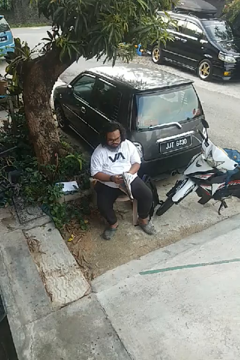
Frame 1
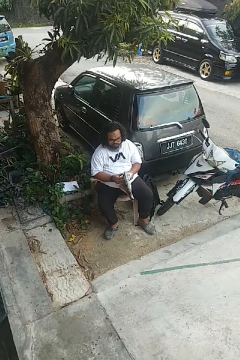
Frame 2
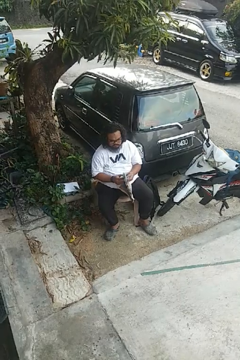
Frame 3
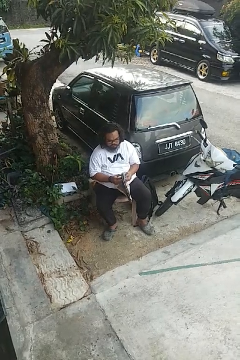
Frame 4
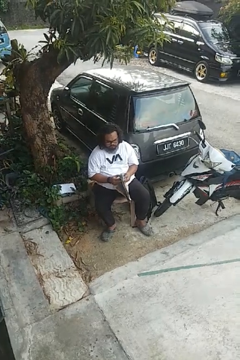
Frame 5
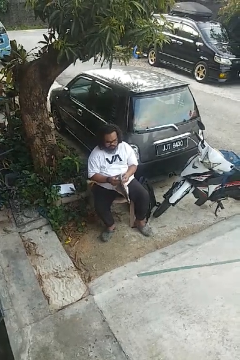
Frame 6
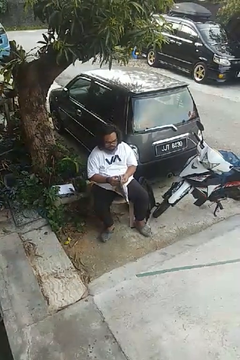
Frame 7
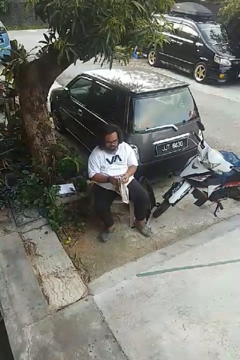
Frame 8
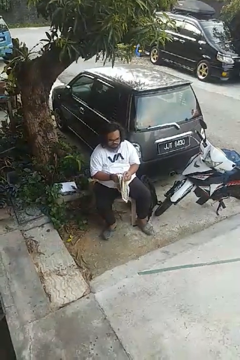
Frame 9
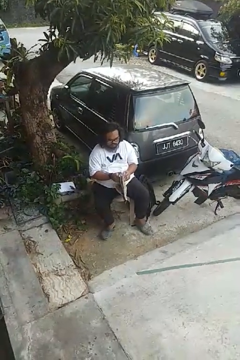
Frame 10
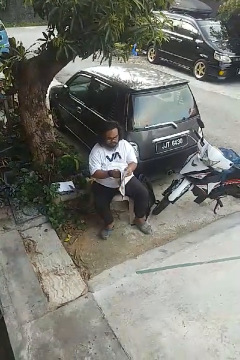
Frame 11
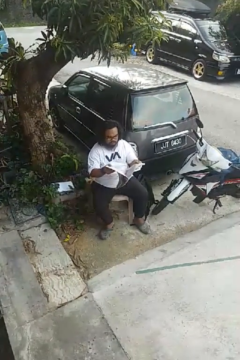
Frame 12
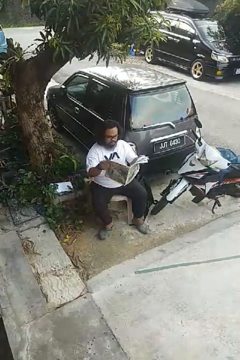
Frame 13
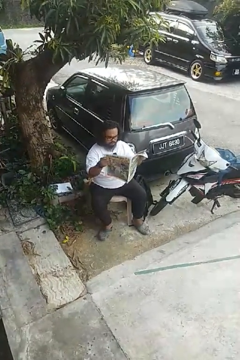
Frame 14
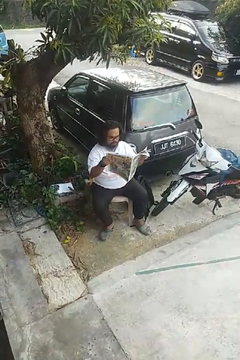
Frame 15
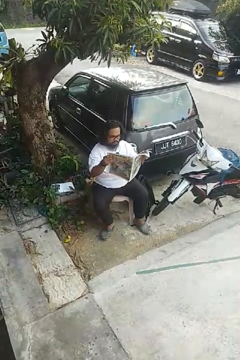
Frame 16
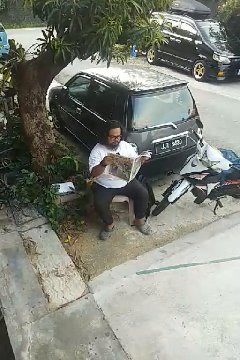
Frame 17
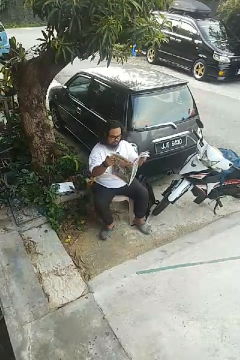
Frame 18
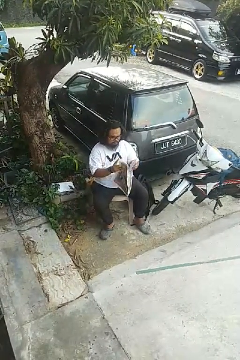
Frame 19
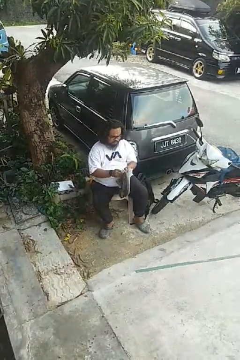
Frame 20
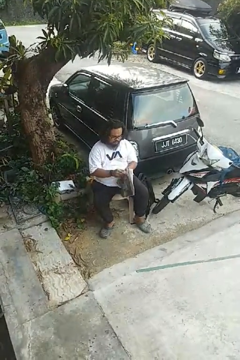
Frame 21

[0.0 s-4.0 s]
person reads newspaper

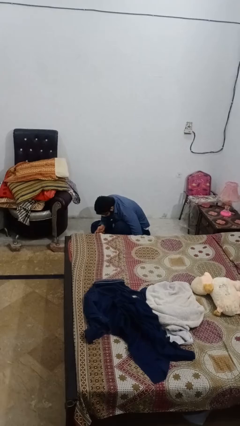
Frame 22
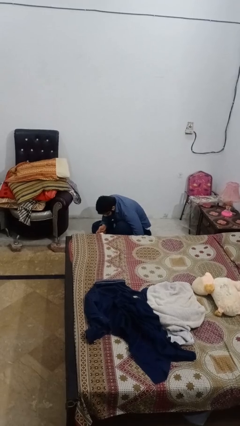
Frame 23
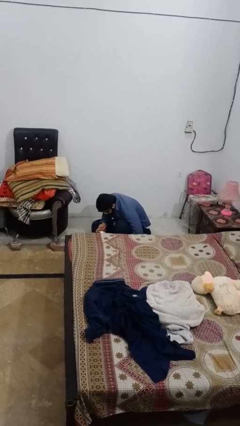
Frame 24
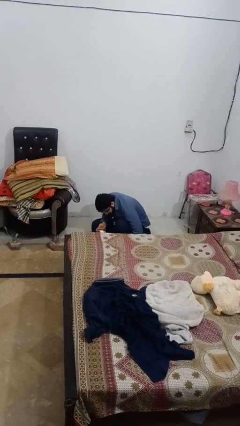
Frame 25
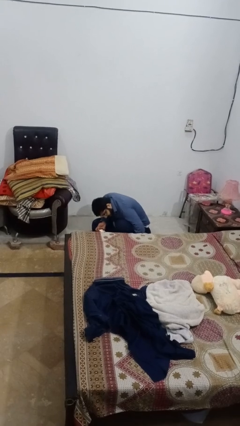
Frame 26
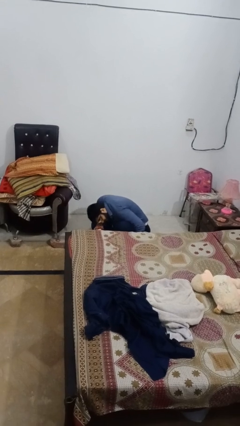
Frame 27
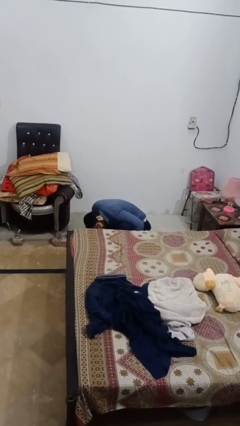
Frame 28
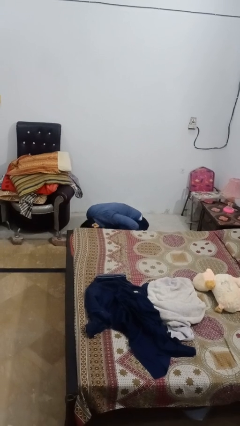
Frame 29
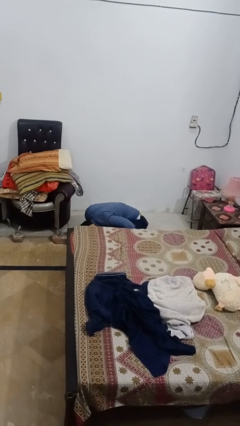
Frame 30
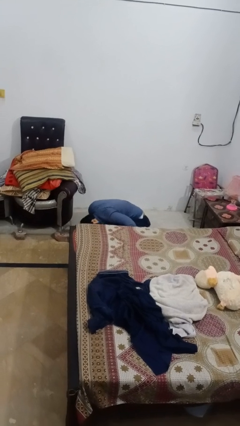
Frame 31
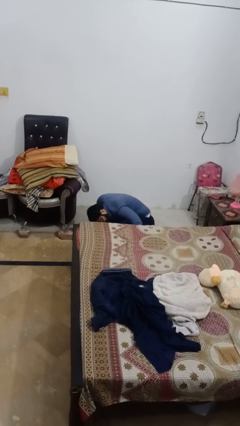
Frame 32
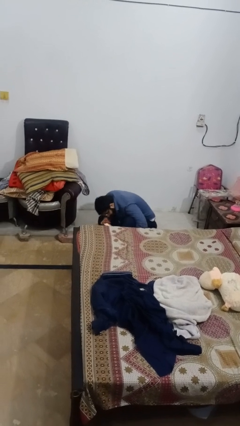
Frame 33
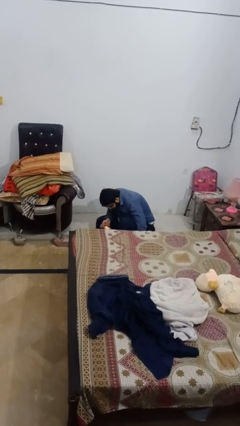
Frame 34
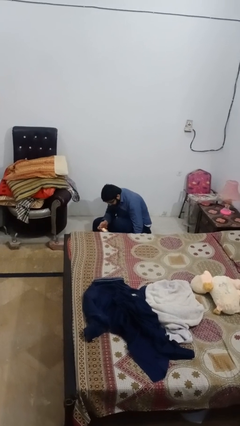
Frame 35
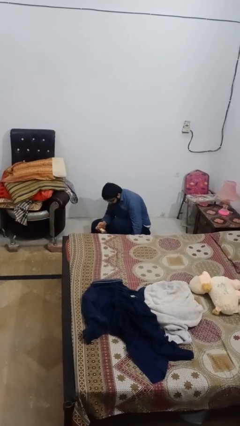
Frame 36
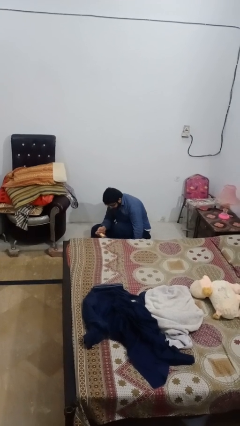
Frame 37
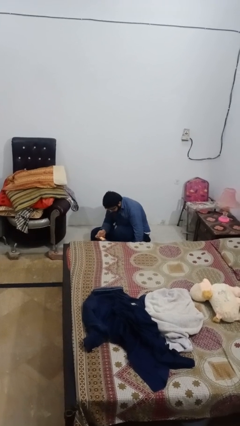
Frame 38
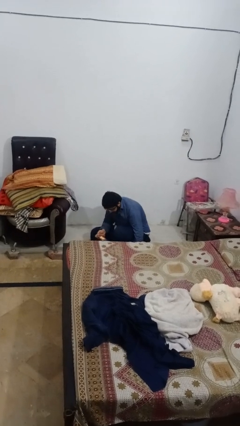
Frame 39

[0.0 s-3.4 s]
person searches under bed

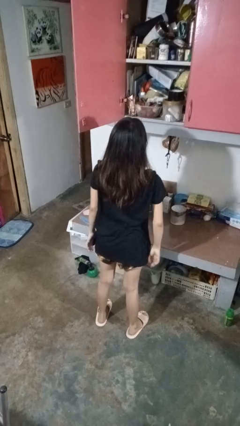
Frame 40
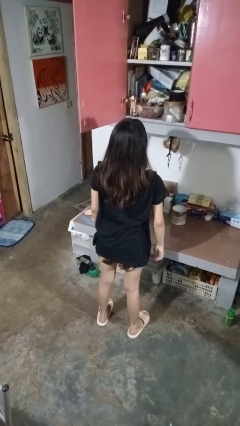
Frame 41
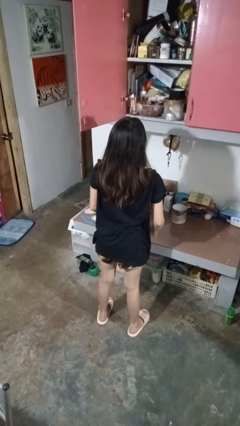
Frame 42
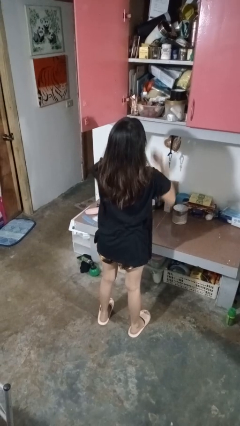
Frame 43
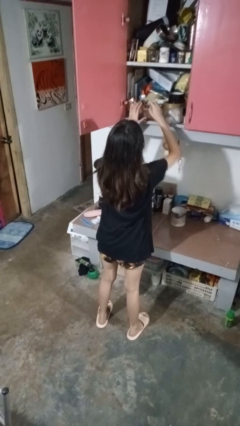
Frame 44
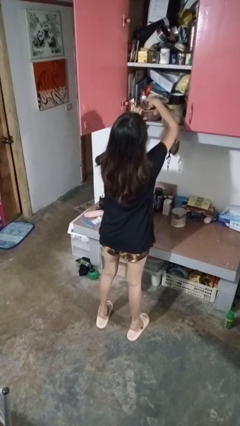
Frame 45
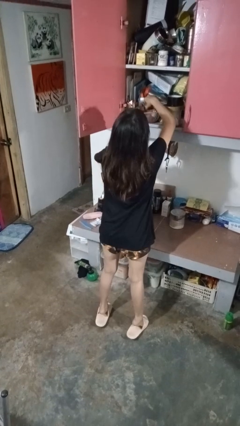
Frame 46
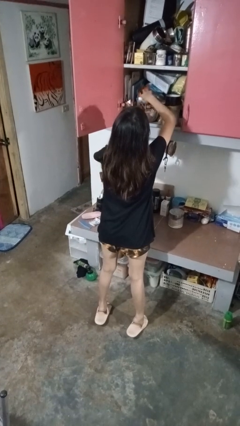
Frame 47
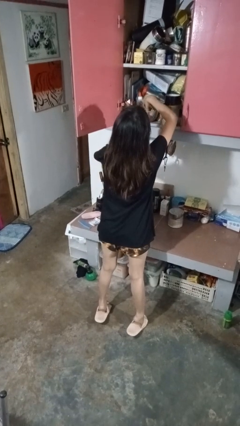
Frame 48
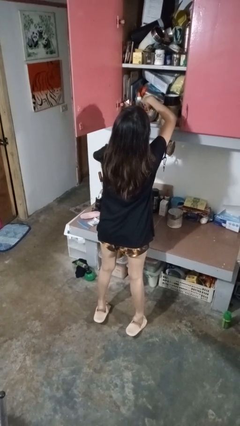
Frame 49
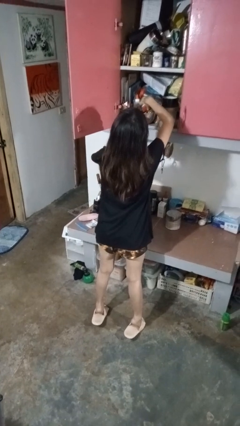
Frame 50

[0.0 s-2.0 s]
person searches in cabinet

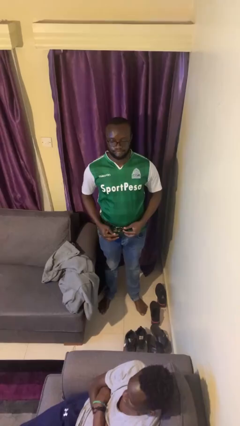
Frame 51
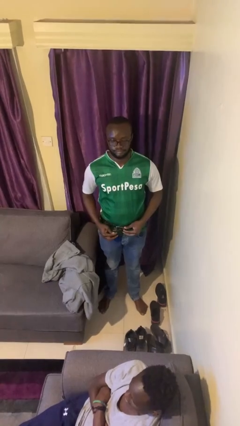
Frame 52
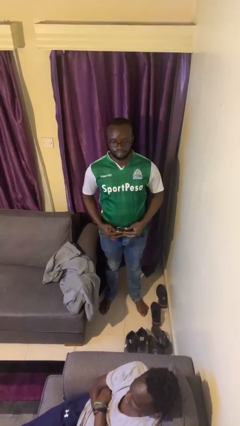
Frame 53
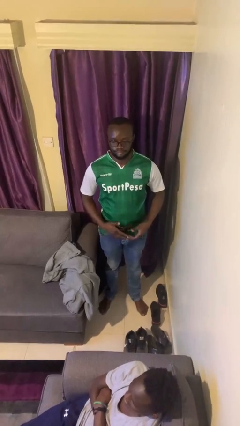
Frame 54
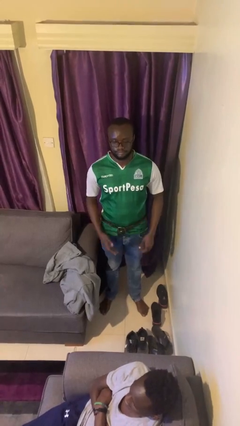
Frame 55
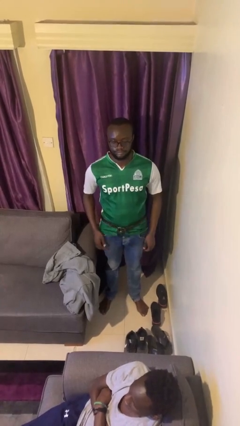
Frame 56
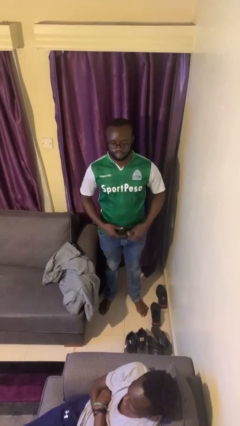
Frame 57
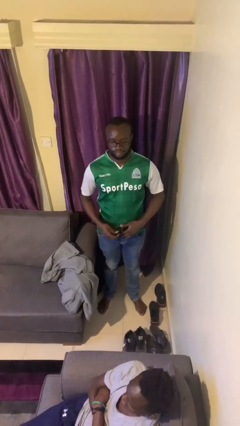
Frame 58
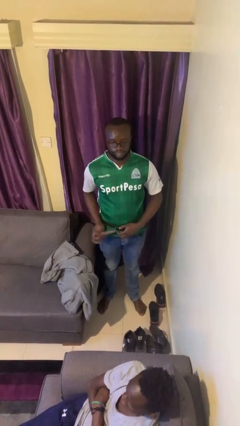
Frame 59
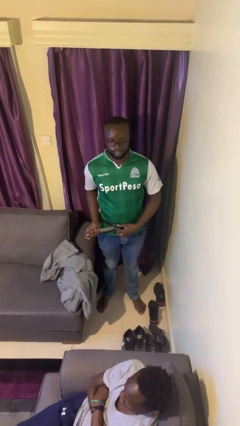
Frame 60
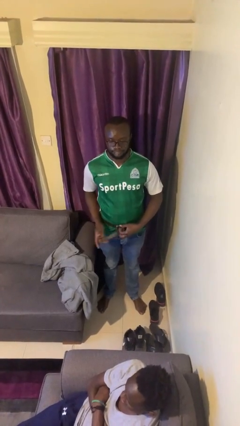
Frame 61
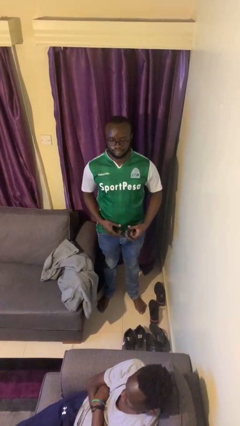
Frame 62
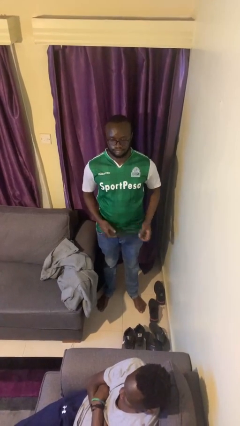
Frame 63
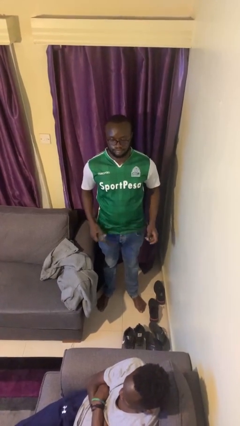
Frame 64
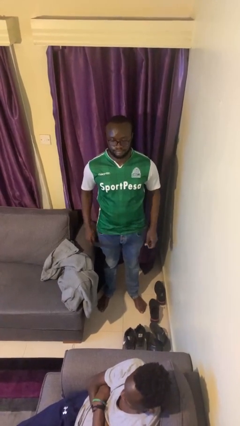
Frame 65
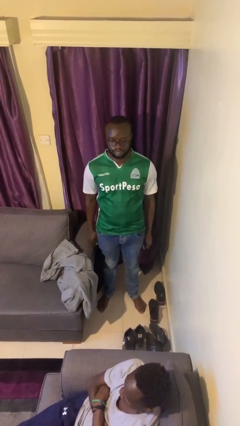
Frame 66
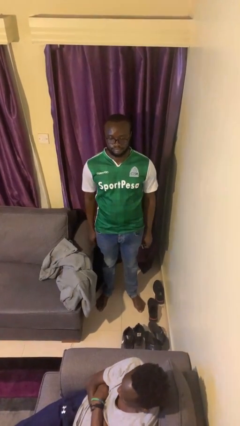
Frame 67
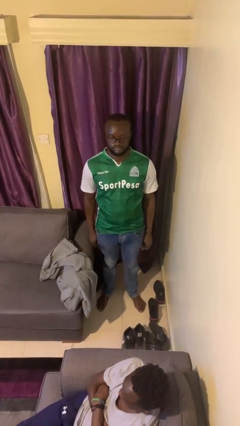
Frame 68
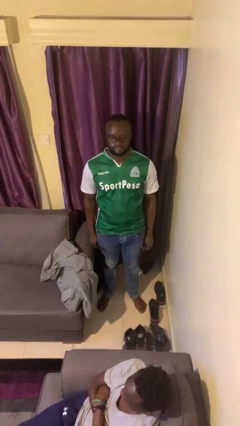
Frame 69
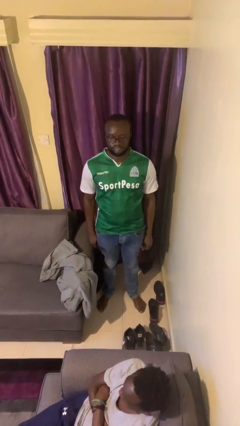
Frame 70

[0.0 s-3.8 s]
person takes off belt

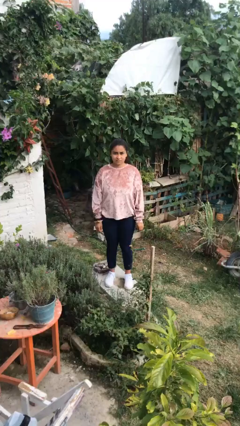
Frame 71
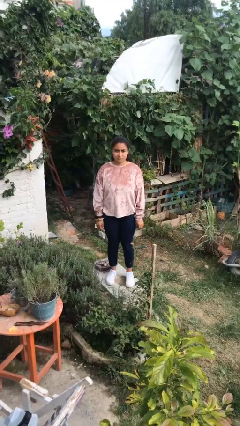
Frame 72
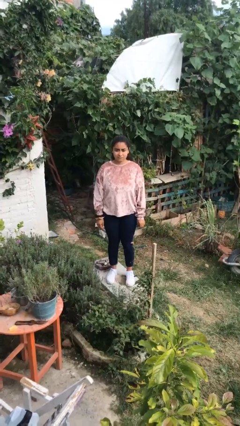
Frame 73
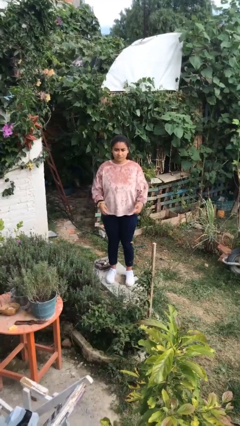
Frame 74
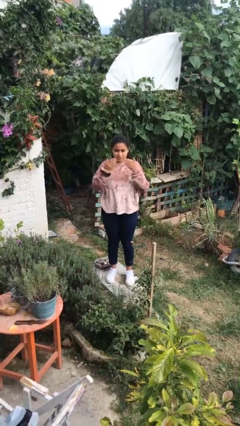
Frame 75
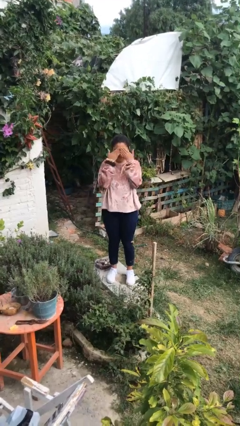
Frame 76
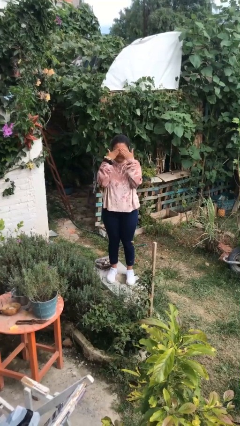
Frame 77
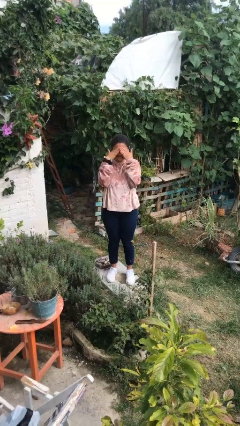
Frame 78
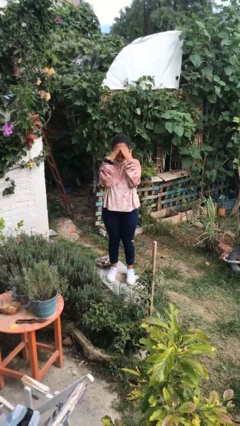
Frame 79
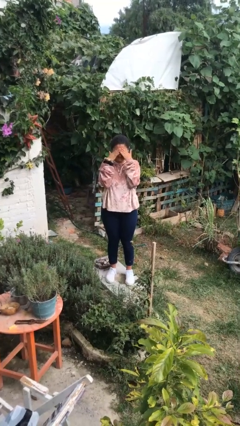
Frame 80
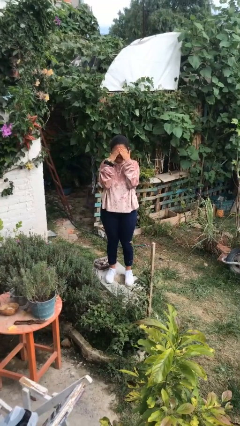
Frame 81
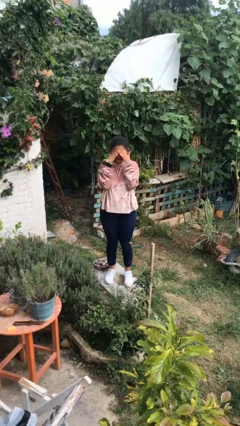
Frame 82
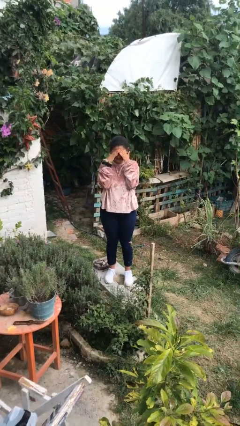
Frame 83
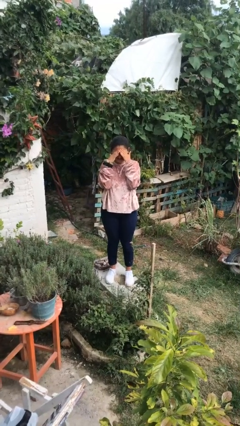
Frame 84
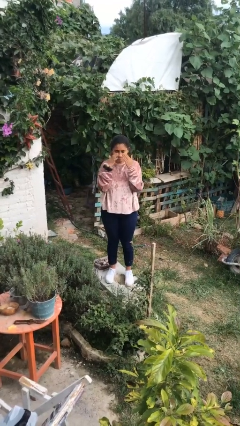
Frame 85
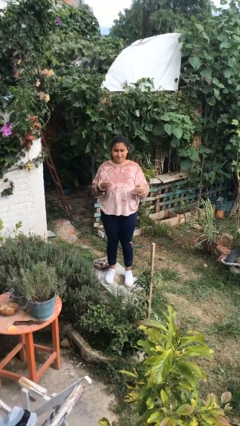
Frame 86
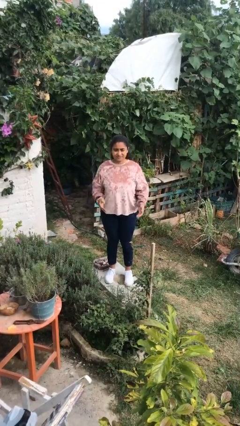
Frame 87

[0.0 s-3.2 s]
person rubs eyes

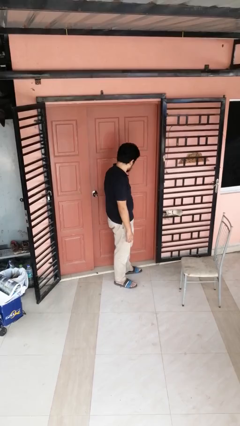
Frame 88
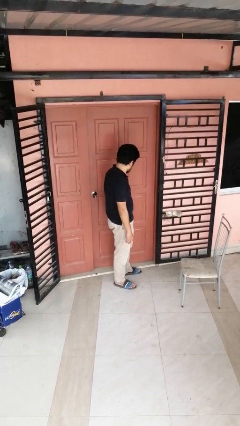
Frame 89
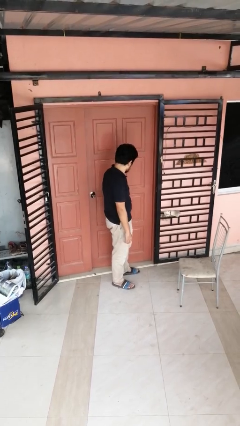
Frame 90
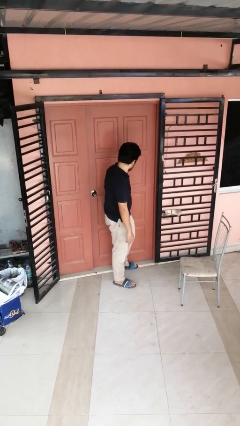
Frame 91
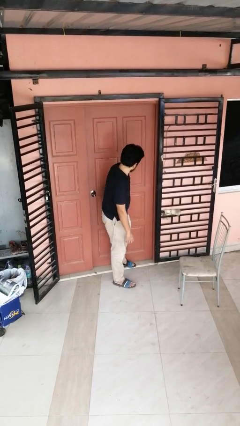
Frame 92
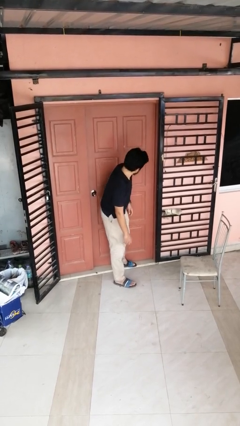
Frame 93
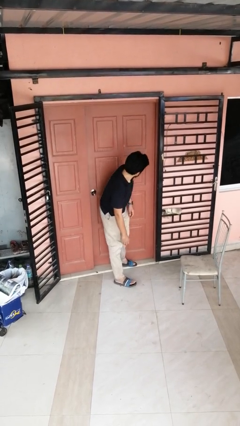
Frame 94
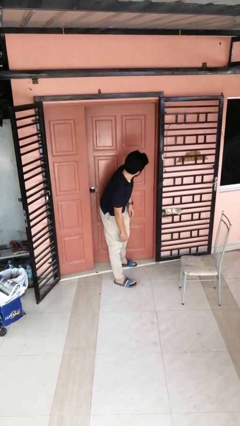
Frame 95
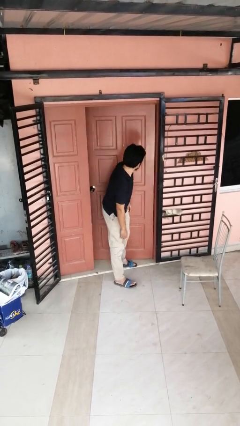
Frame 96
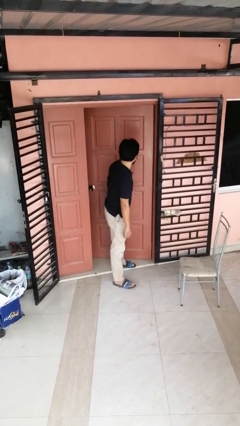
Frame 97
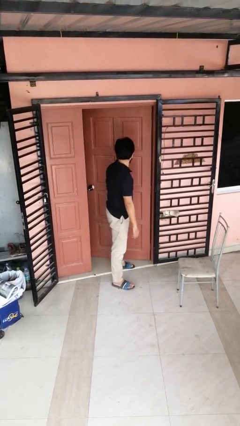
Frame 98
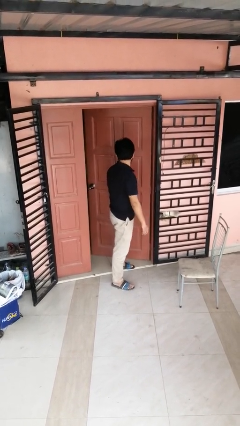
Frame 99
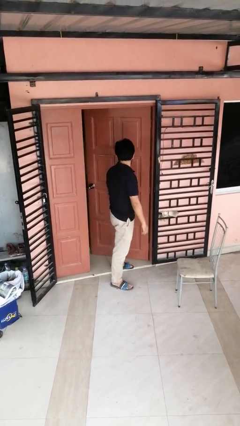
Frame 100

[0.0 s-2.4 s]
person opens facility door
